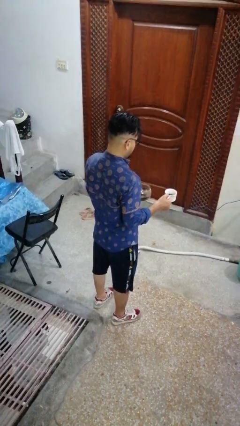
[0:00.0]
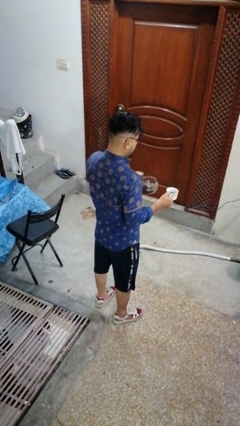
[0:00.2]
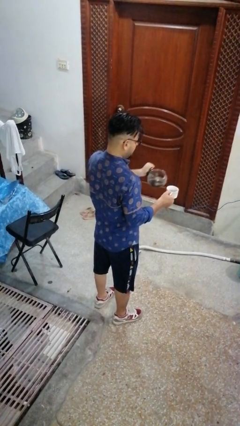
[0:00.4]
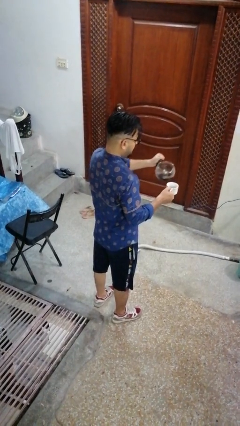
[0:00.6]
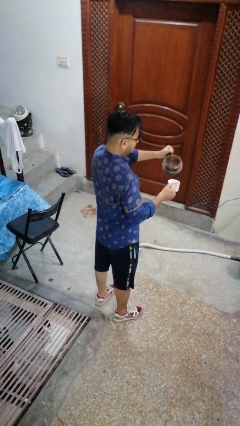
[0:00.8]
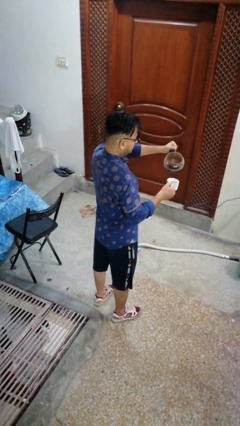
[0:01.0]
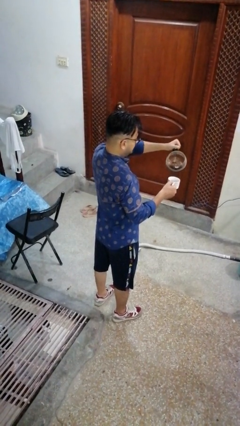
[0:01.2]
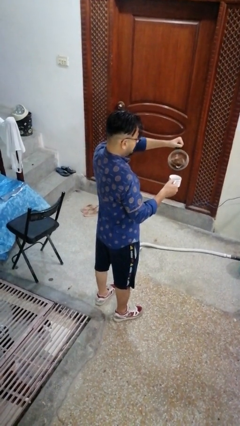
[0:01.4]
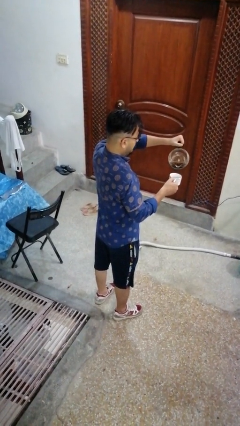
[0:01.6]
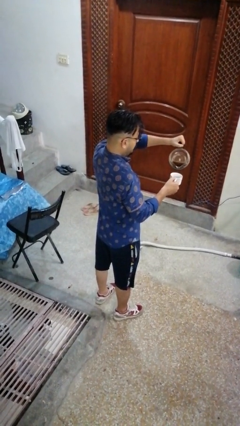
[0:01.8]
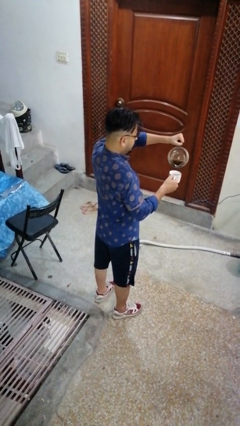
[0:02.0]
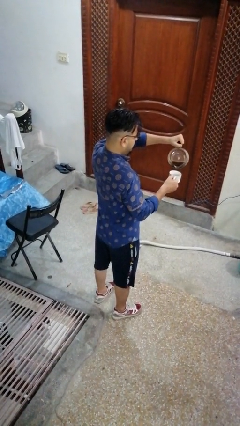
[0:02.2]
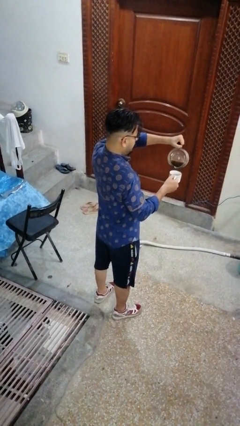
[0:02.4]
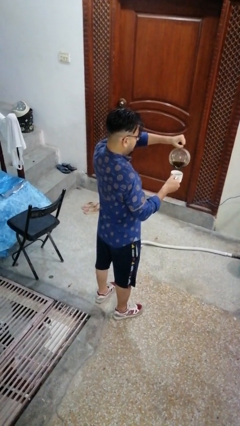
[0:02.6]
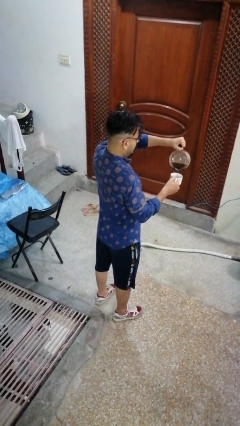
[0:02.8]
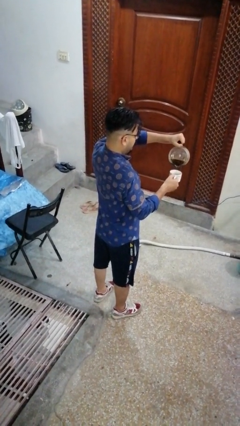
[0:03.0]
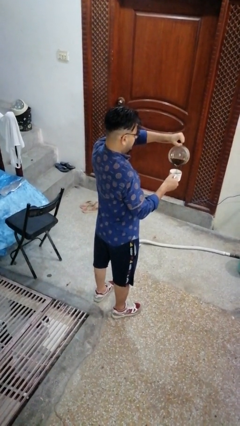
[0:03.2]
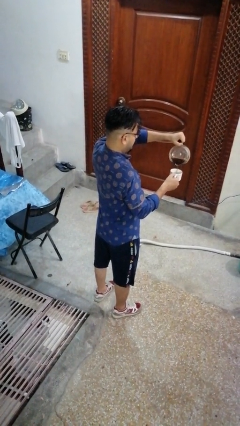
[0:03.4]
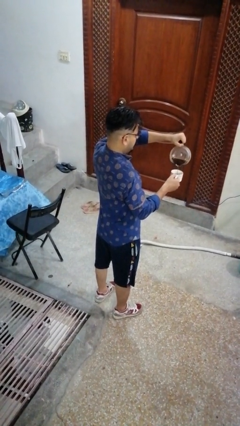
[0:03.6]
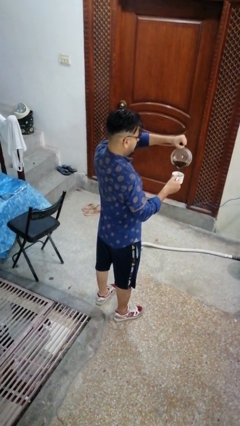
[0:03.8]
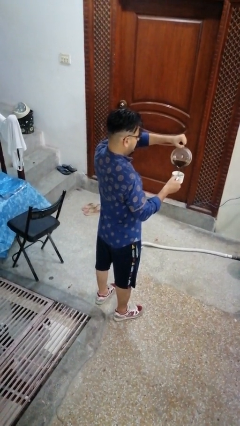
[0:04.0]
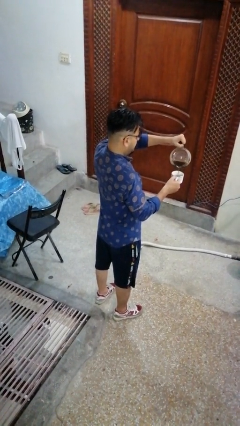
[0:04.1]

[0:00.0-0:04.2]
person pours coffee into mug

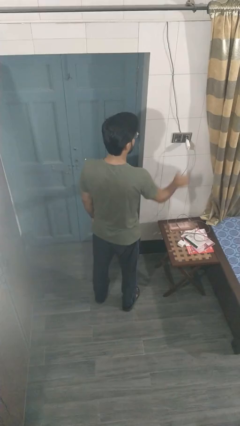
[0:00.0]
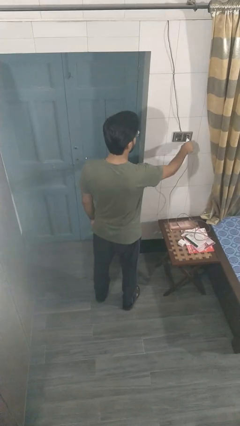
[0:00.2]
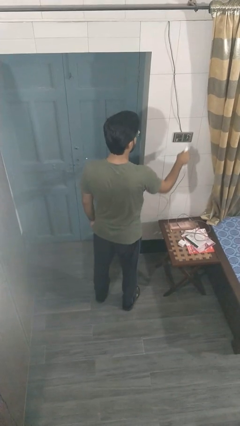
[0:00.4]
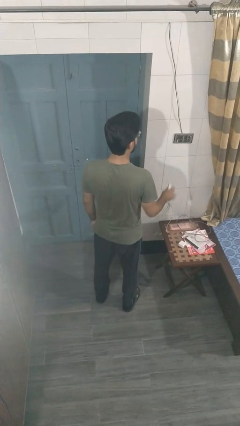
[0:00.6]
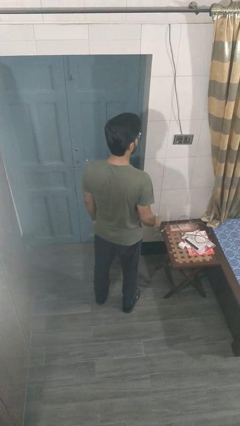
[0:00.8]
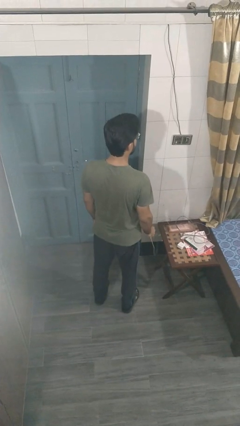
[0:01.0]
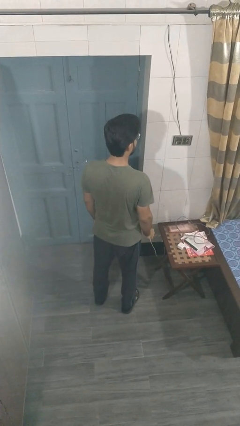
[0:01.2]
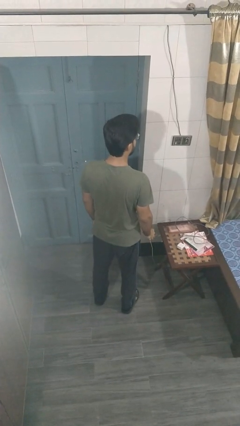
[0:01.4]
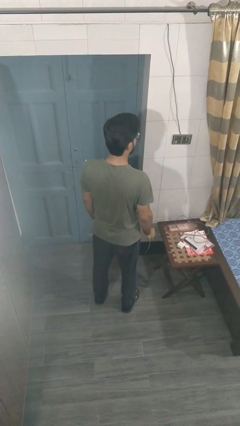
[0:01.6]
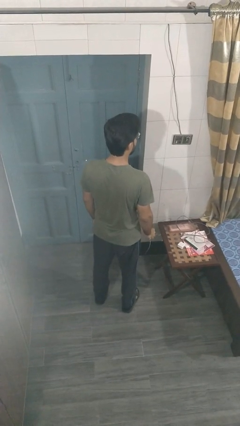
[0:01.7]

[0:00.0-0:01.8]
person unplugs from electrical socket

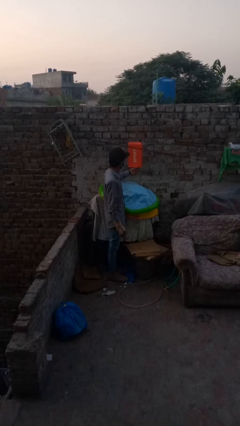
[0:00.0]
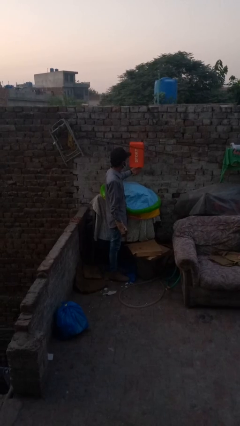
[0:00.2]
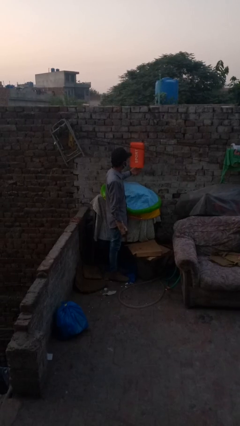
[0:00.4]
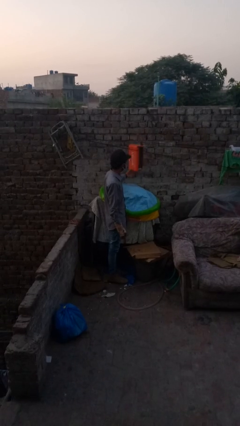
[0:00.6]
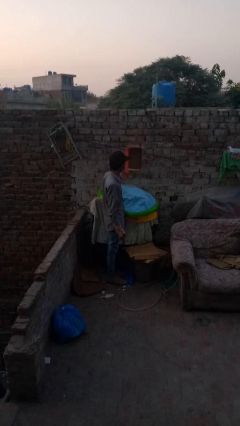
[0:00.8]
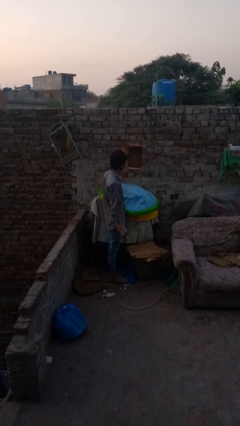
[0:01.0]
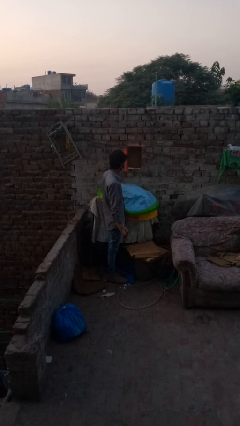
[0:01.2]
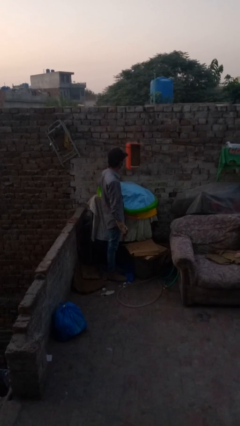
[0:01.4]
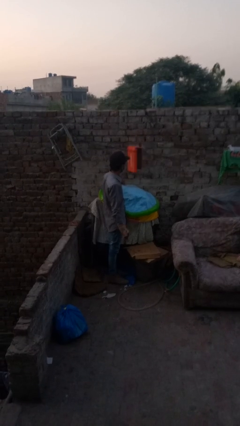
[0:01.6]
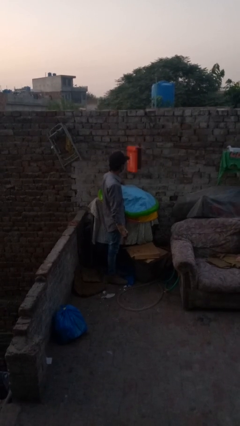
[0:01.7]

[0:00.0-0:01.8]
person opens mailbox

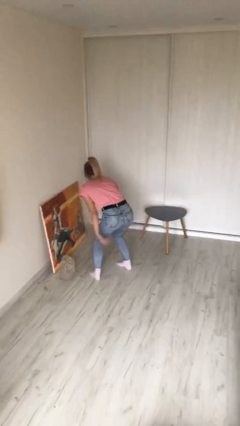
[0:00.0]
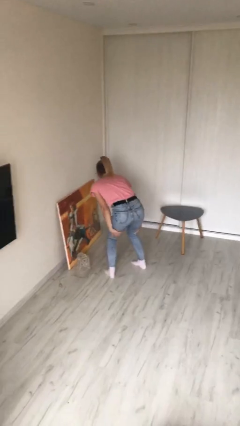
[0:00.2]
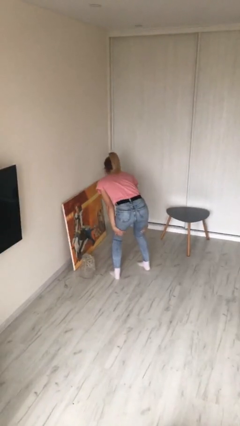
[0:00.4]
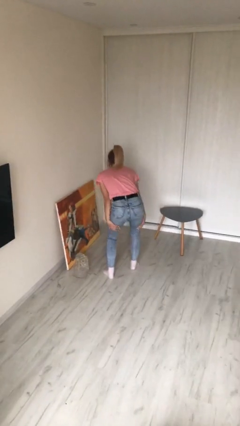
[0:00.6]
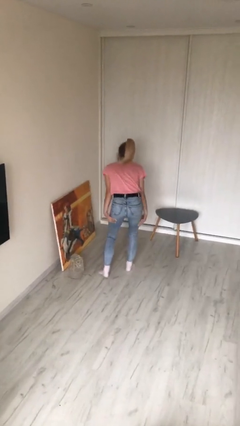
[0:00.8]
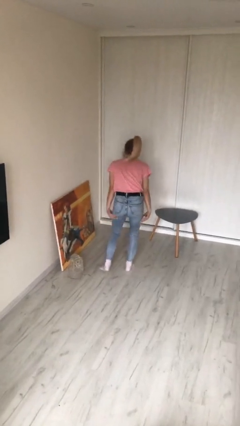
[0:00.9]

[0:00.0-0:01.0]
person bumps into table

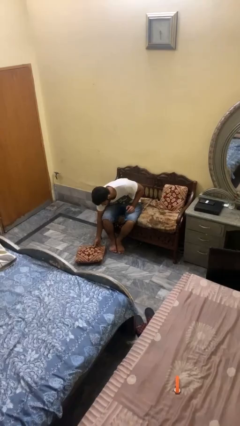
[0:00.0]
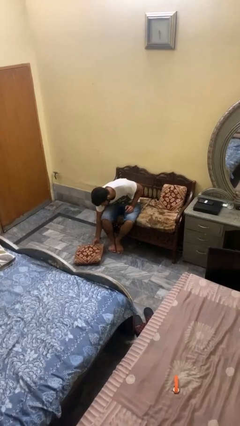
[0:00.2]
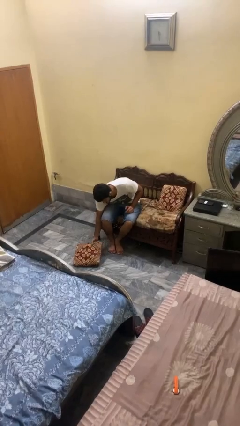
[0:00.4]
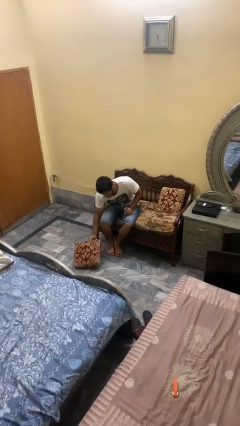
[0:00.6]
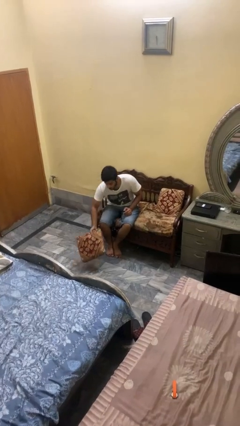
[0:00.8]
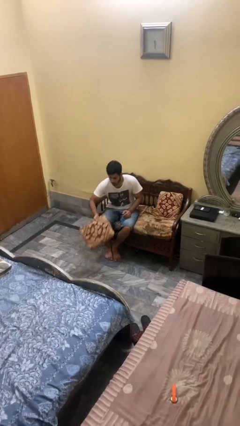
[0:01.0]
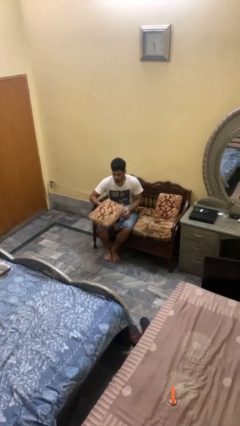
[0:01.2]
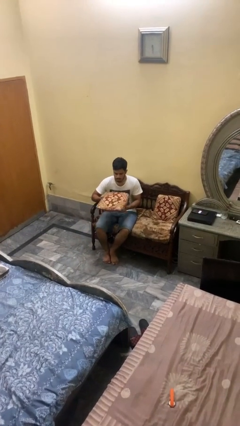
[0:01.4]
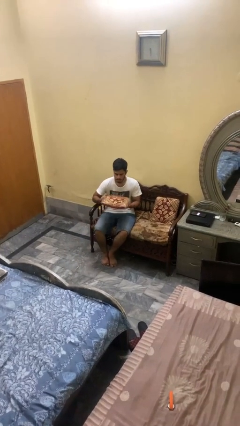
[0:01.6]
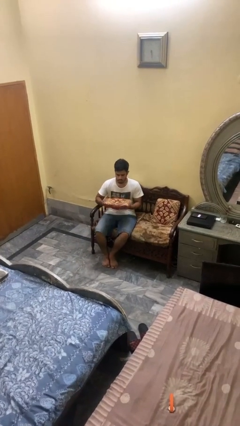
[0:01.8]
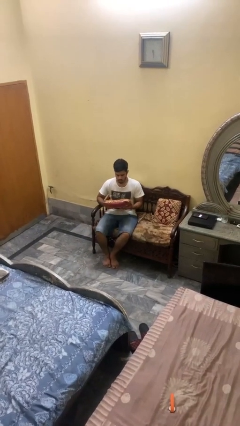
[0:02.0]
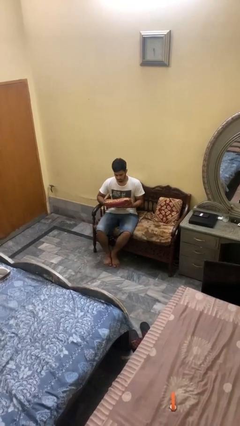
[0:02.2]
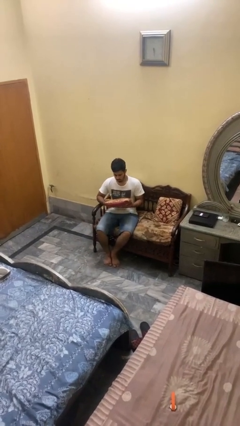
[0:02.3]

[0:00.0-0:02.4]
person picks up object from floor

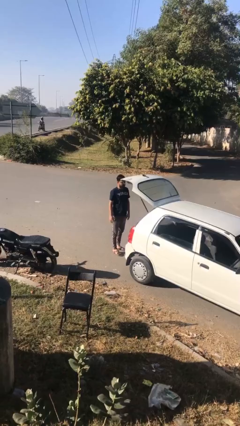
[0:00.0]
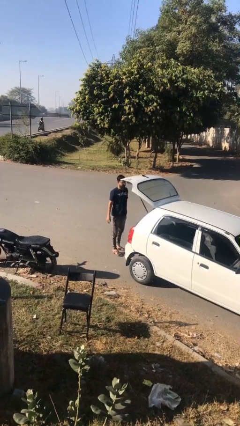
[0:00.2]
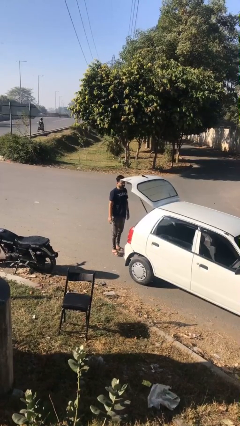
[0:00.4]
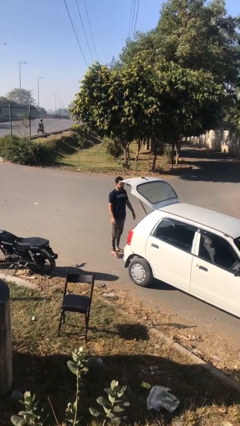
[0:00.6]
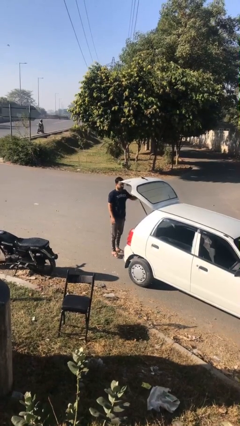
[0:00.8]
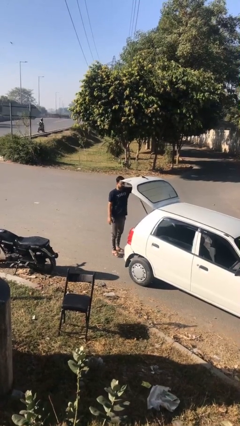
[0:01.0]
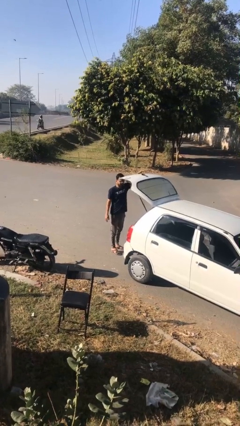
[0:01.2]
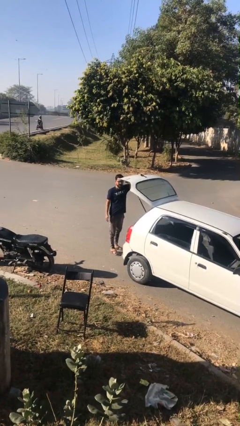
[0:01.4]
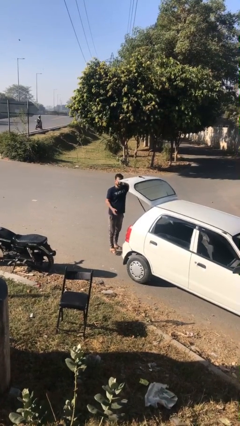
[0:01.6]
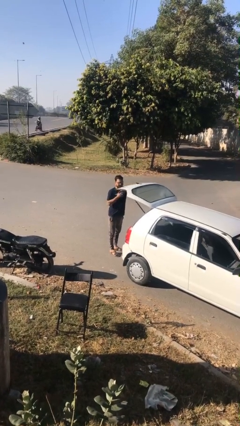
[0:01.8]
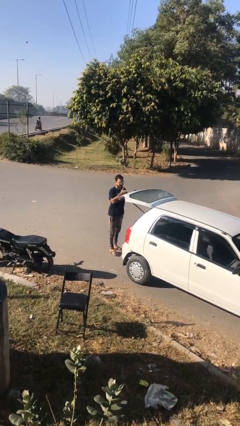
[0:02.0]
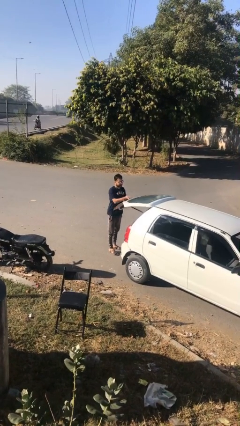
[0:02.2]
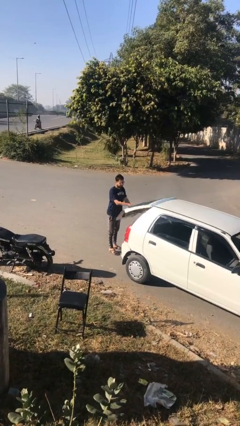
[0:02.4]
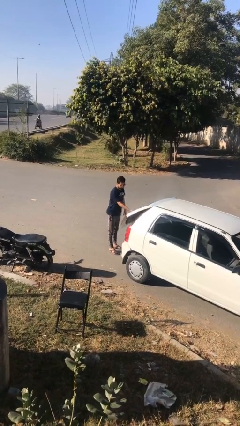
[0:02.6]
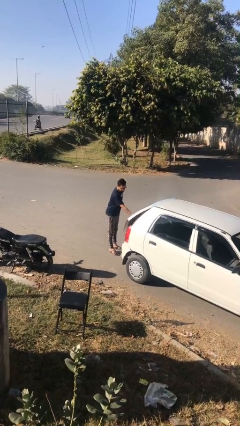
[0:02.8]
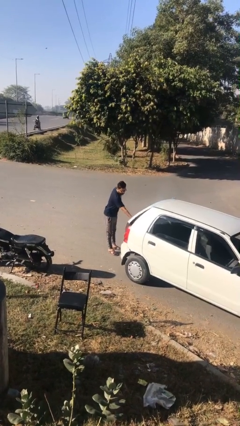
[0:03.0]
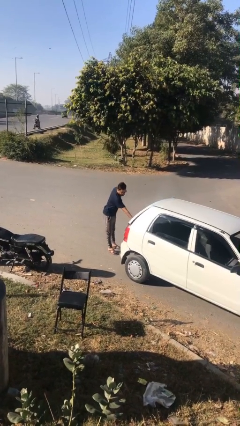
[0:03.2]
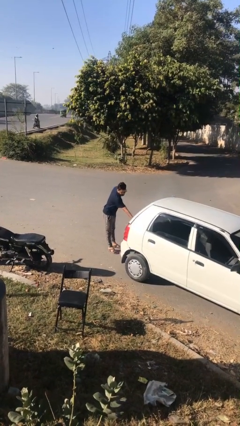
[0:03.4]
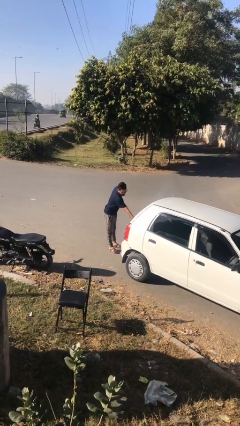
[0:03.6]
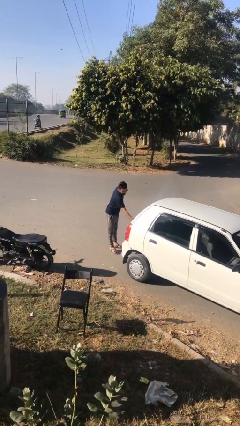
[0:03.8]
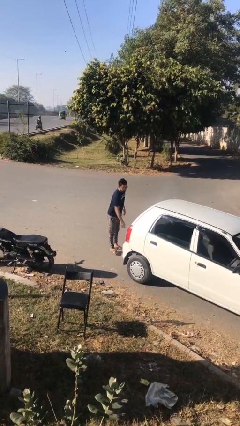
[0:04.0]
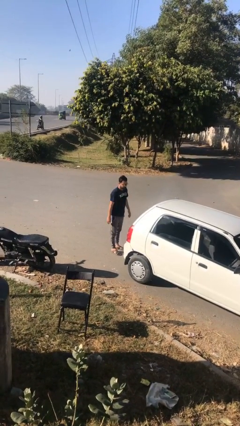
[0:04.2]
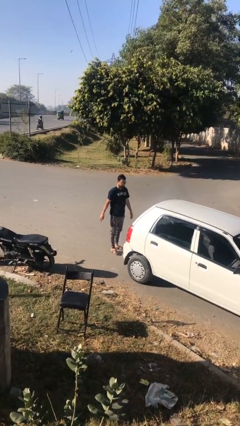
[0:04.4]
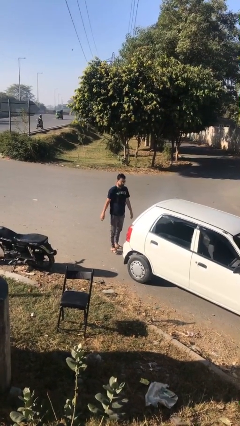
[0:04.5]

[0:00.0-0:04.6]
person closes car trunk

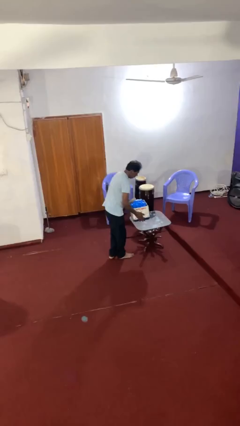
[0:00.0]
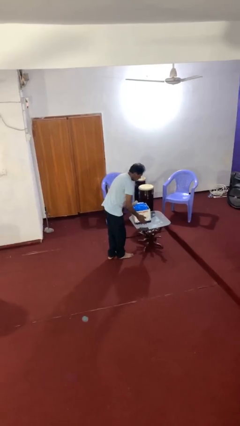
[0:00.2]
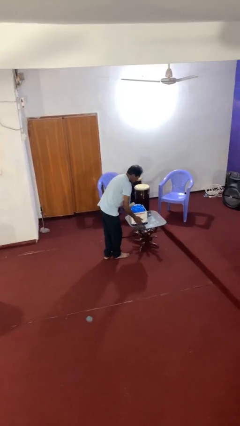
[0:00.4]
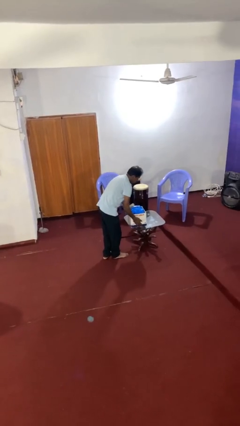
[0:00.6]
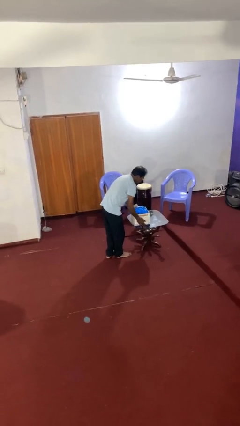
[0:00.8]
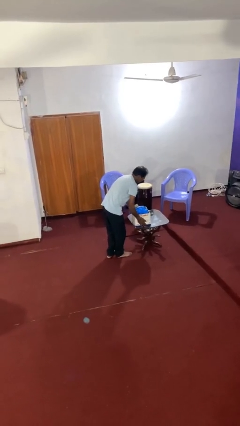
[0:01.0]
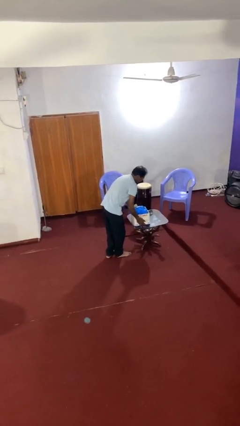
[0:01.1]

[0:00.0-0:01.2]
person puts down object on table
